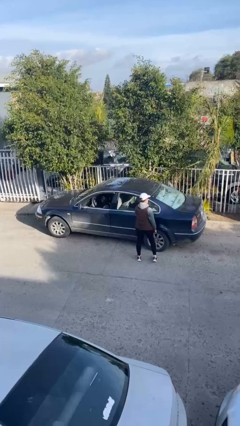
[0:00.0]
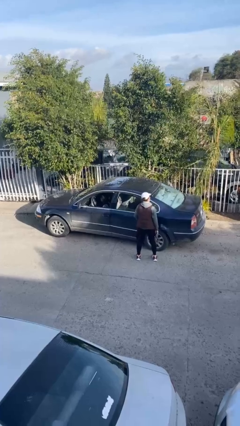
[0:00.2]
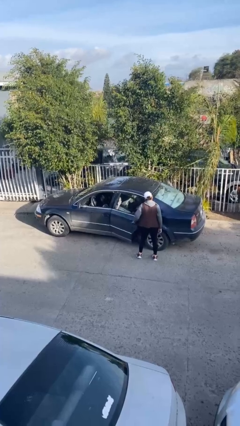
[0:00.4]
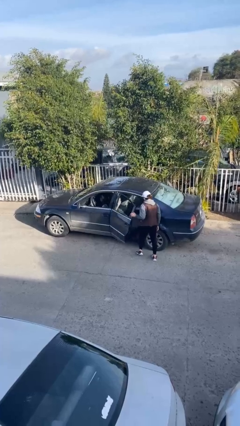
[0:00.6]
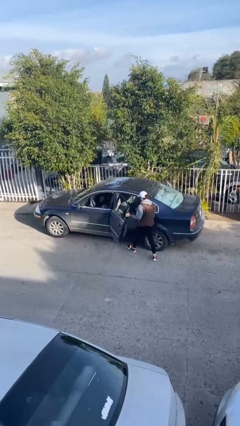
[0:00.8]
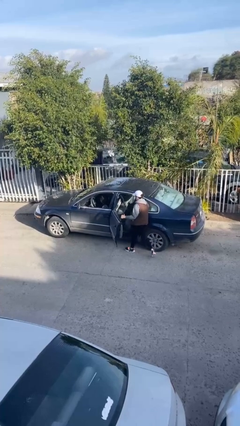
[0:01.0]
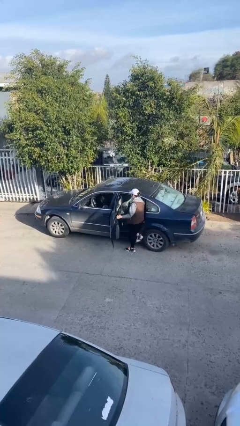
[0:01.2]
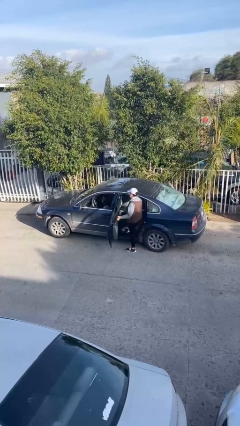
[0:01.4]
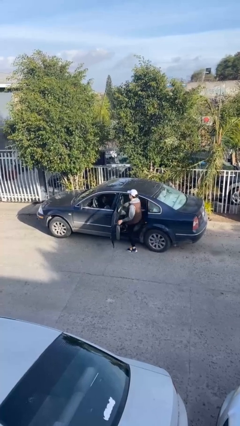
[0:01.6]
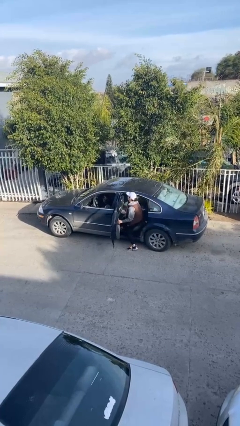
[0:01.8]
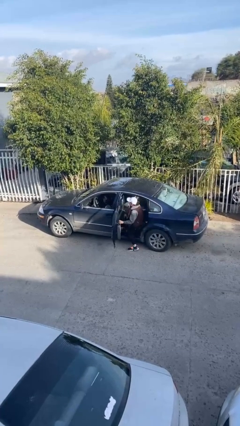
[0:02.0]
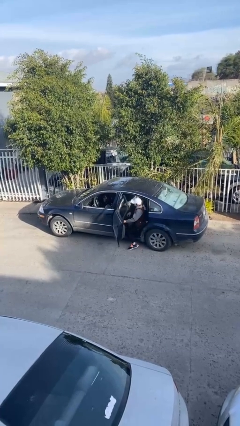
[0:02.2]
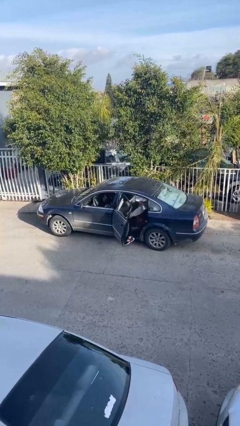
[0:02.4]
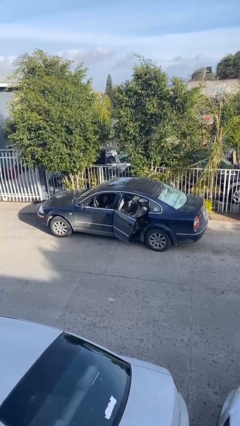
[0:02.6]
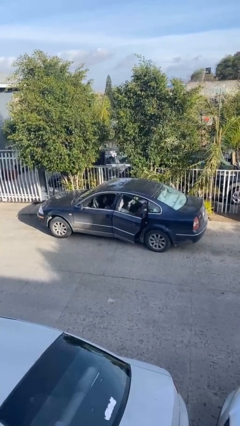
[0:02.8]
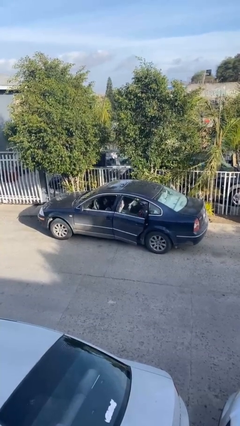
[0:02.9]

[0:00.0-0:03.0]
car picks up person

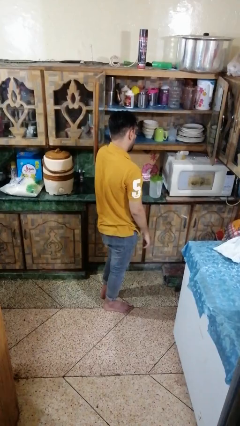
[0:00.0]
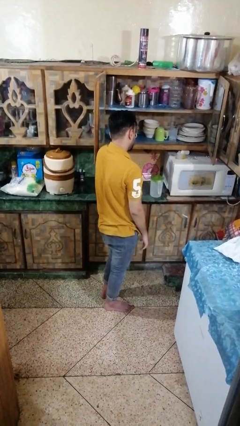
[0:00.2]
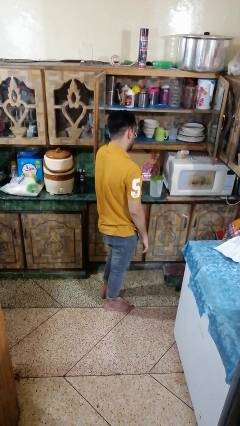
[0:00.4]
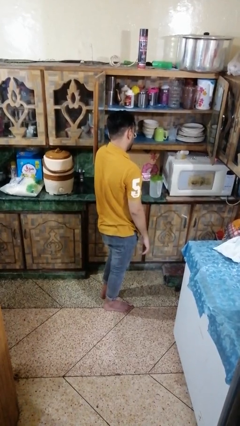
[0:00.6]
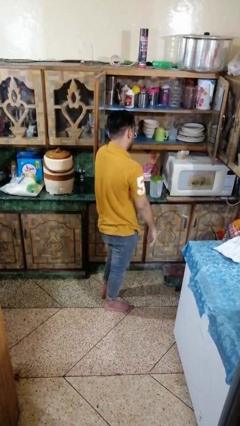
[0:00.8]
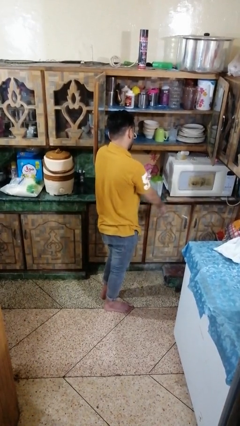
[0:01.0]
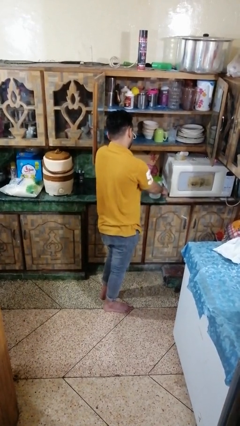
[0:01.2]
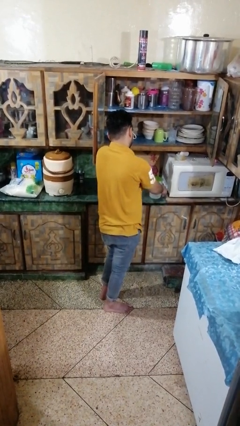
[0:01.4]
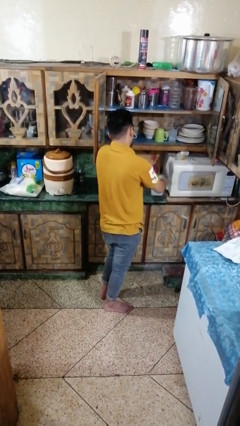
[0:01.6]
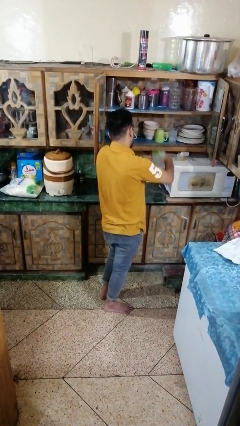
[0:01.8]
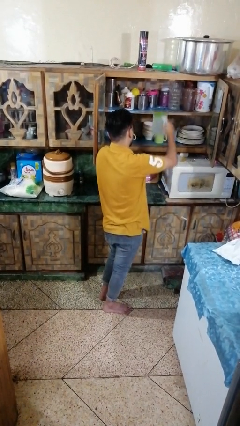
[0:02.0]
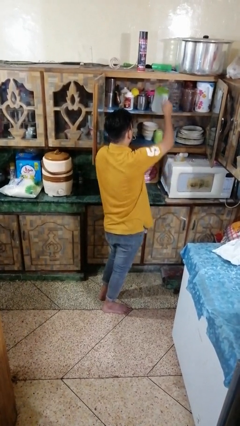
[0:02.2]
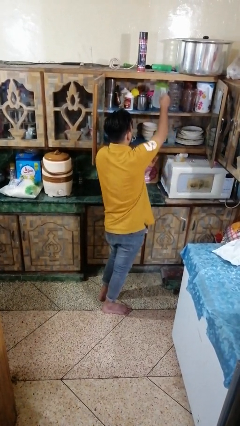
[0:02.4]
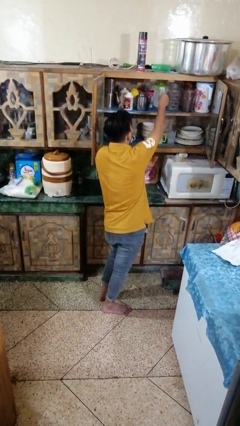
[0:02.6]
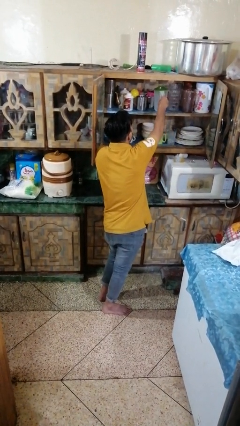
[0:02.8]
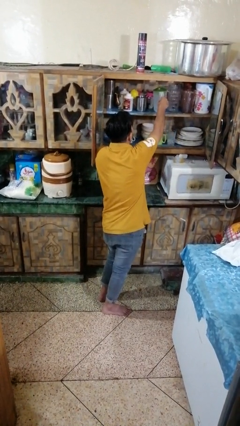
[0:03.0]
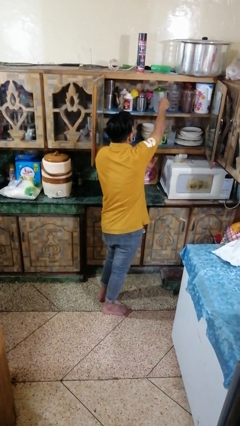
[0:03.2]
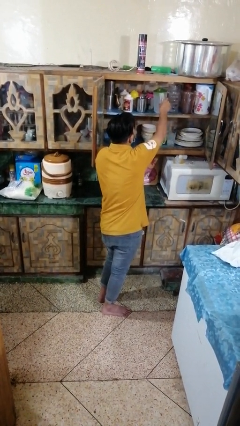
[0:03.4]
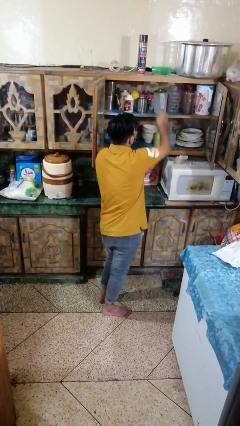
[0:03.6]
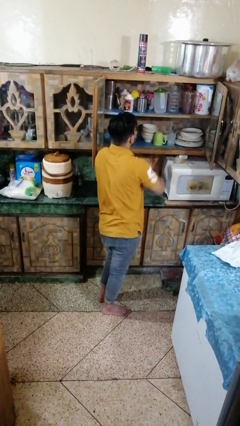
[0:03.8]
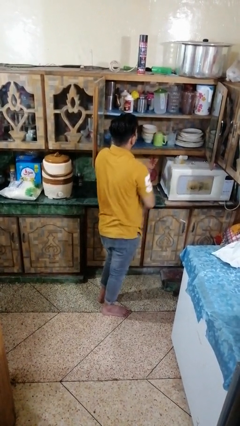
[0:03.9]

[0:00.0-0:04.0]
person puts object in cabinet

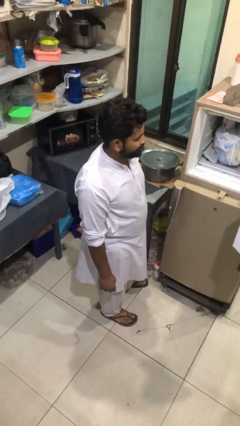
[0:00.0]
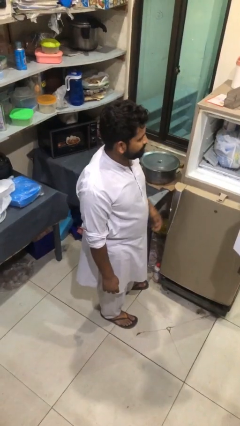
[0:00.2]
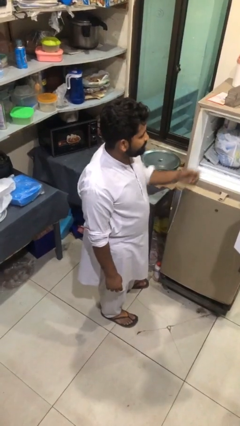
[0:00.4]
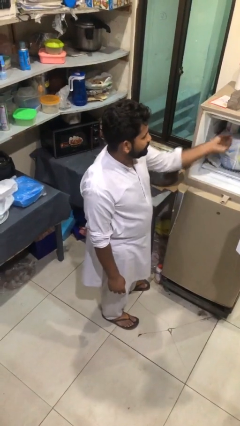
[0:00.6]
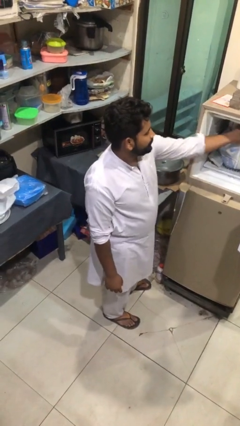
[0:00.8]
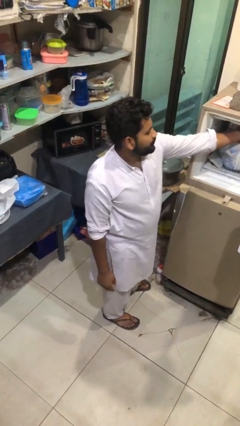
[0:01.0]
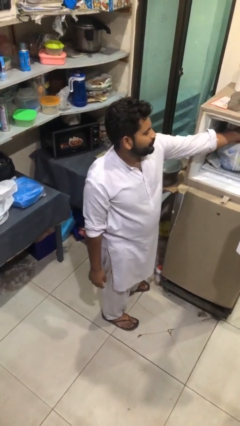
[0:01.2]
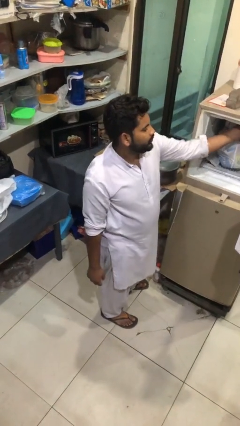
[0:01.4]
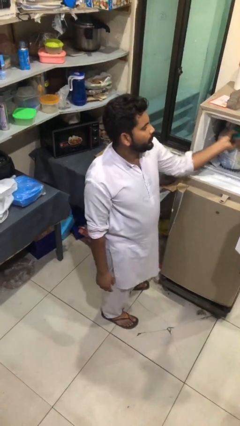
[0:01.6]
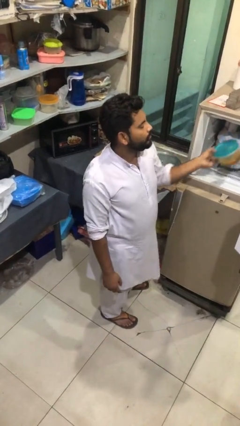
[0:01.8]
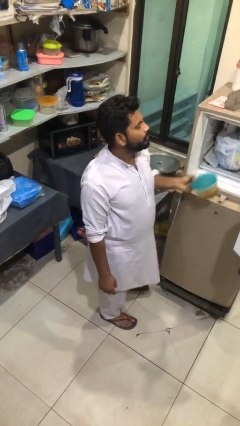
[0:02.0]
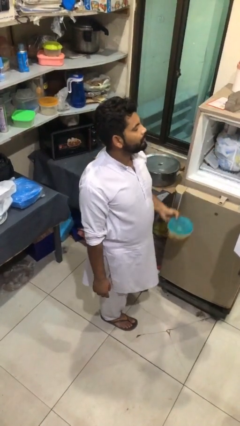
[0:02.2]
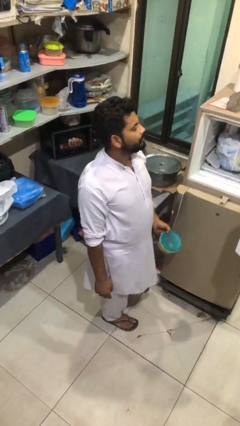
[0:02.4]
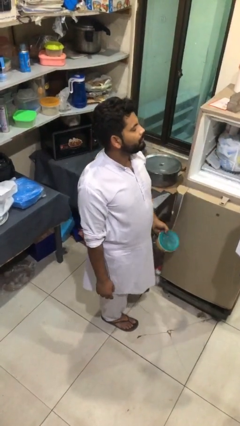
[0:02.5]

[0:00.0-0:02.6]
person takes object from refrigerator

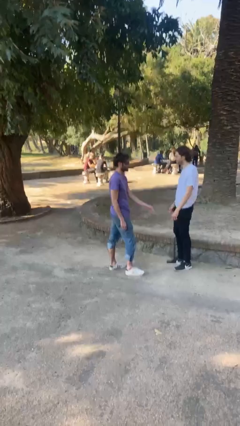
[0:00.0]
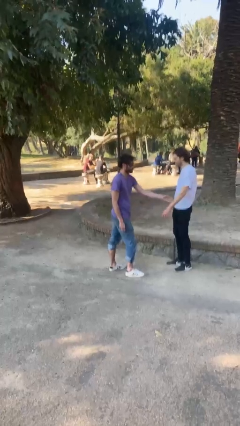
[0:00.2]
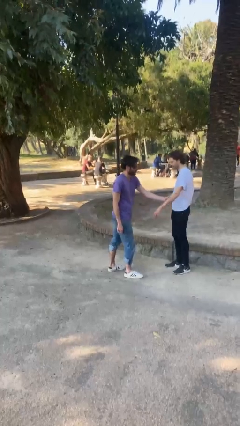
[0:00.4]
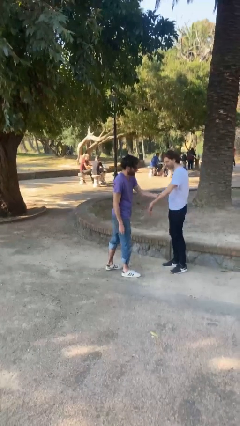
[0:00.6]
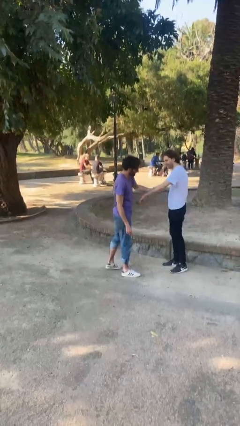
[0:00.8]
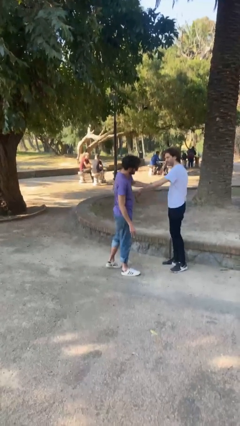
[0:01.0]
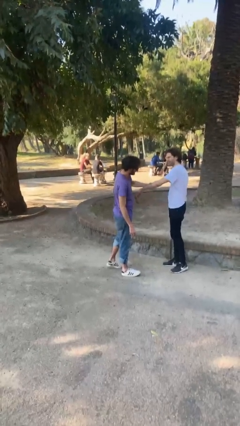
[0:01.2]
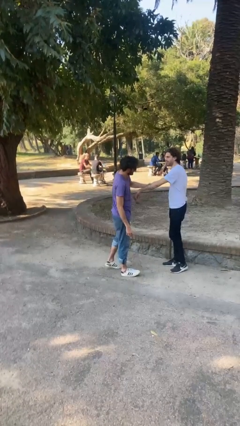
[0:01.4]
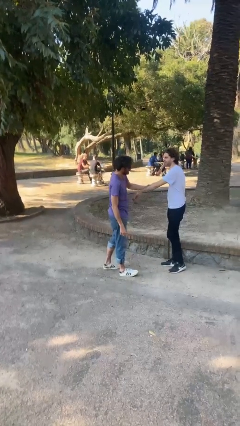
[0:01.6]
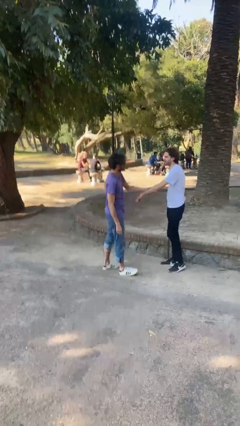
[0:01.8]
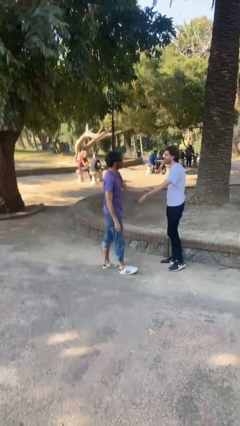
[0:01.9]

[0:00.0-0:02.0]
person grabs person by forearm

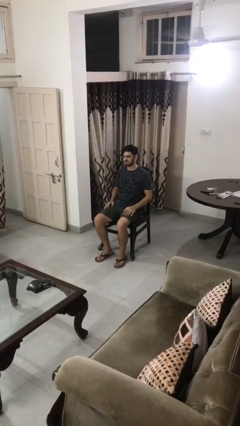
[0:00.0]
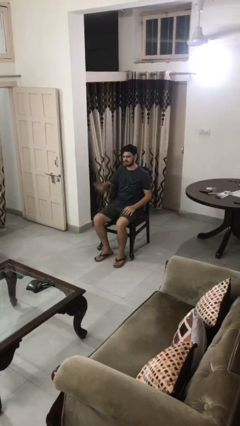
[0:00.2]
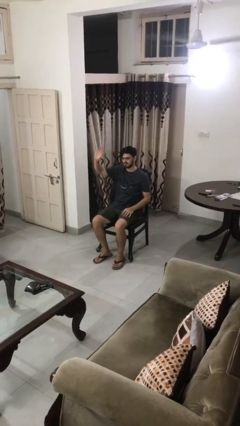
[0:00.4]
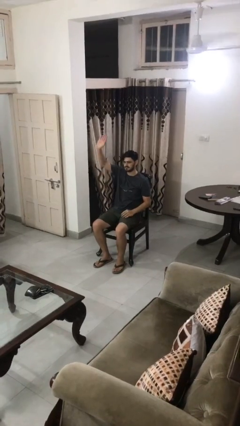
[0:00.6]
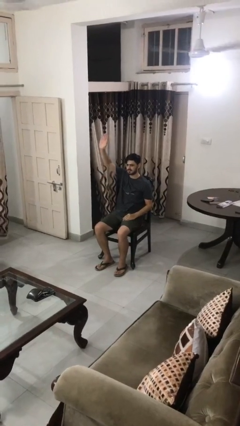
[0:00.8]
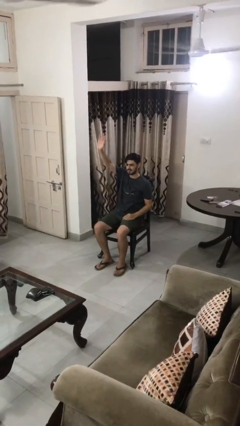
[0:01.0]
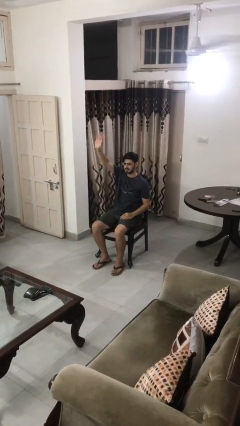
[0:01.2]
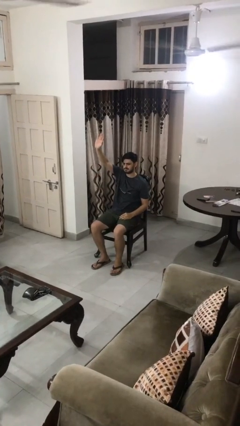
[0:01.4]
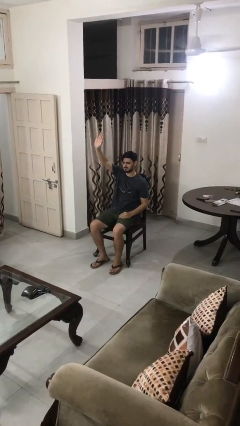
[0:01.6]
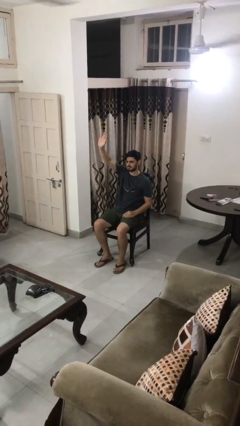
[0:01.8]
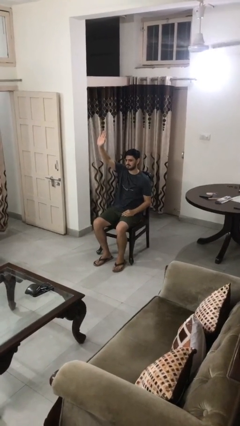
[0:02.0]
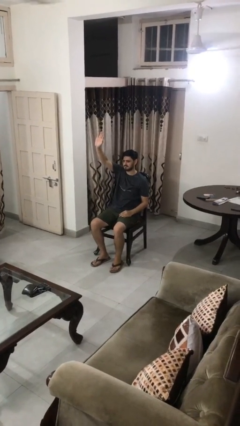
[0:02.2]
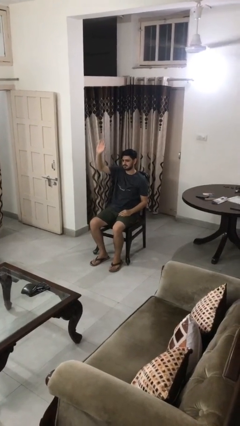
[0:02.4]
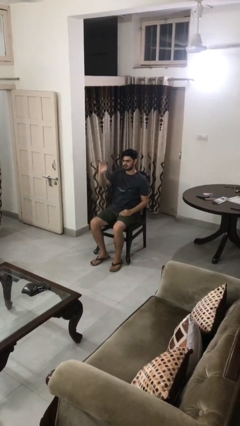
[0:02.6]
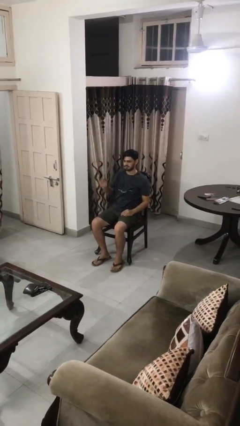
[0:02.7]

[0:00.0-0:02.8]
person gestures raise hand

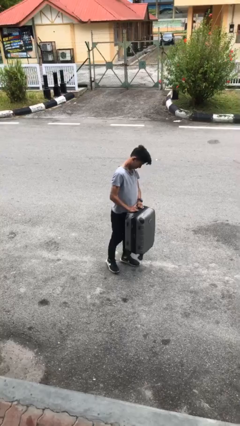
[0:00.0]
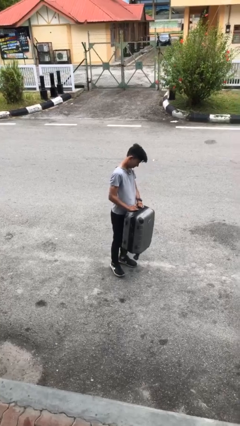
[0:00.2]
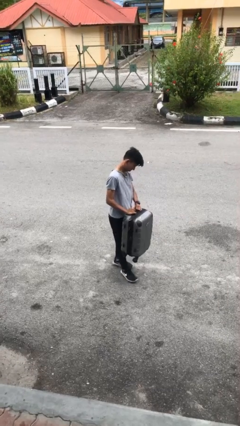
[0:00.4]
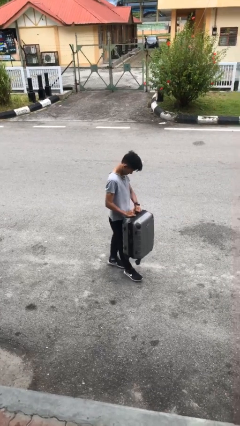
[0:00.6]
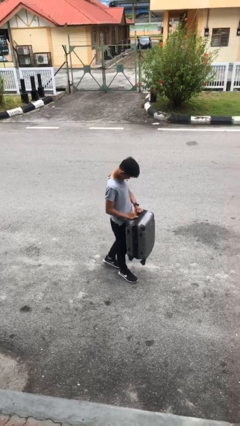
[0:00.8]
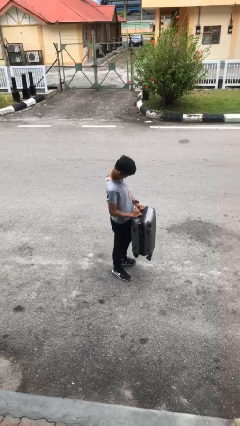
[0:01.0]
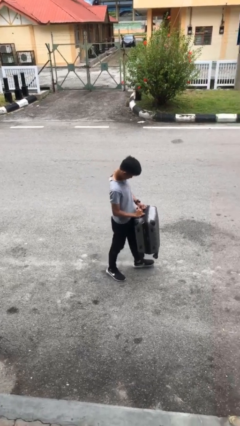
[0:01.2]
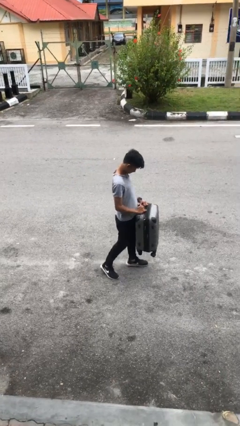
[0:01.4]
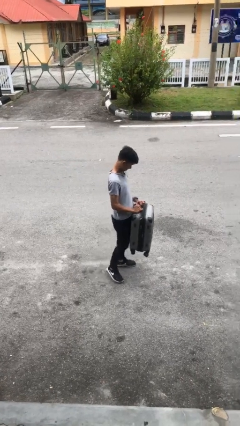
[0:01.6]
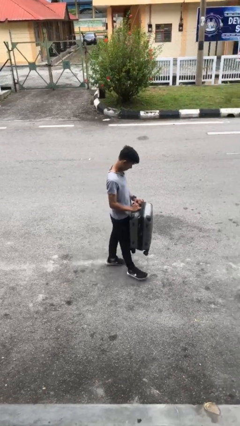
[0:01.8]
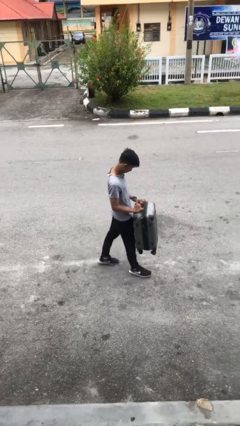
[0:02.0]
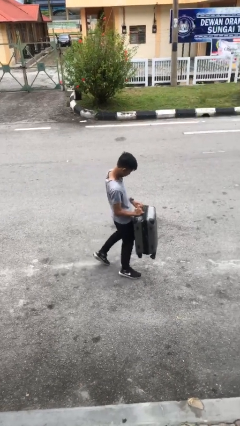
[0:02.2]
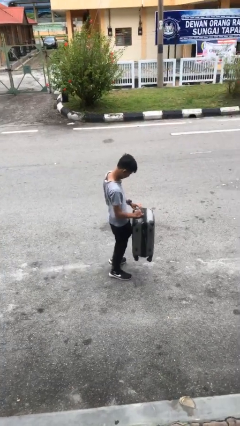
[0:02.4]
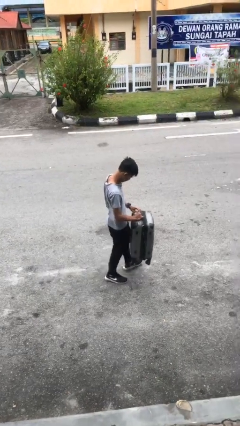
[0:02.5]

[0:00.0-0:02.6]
person carries heavy object

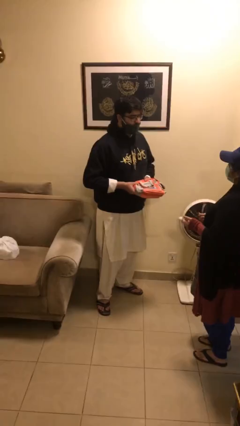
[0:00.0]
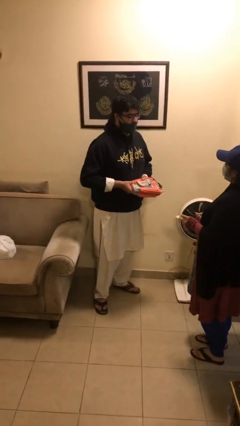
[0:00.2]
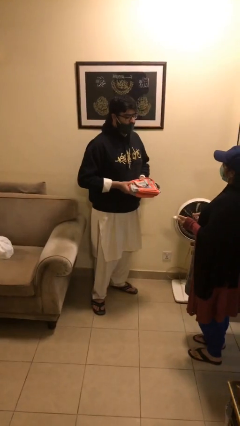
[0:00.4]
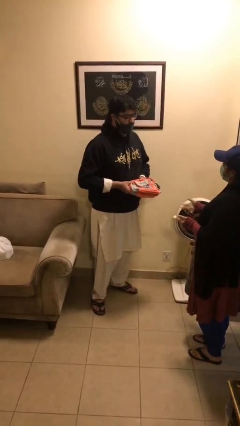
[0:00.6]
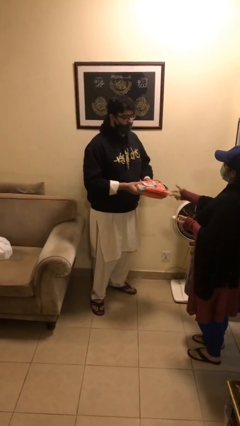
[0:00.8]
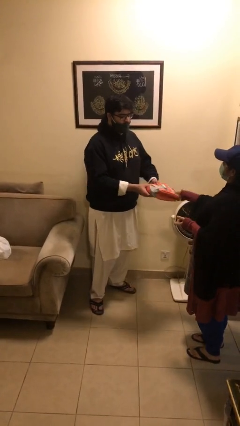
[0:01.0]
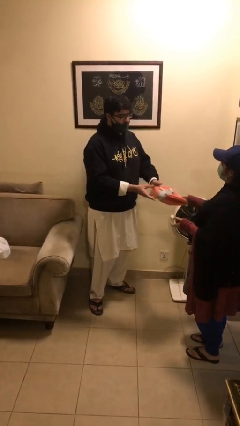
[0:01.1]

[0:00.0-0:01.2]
person transfers object to person
